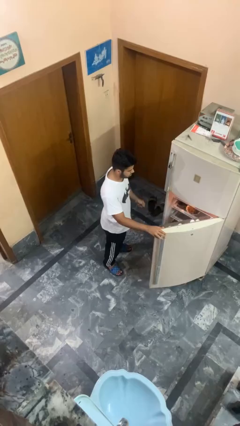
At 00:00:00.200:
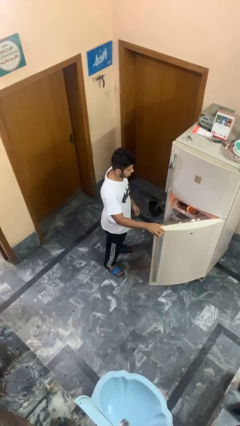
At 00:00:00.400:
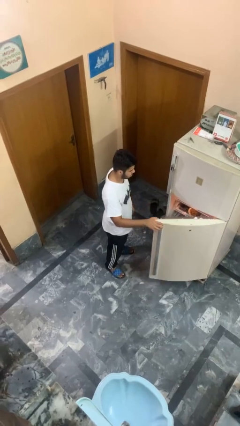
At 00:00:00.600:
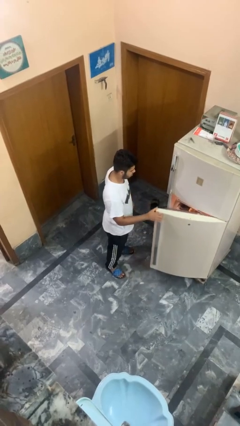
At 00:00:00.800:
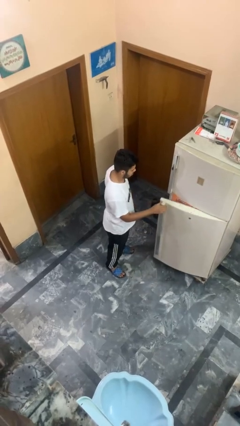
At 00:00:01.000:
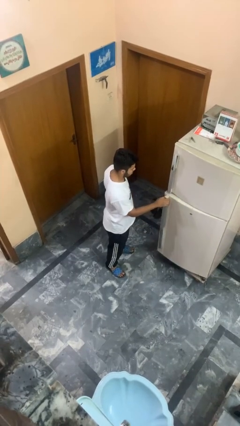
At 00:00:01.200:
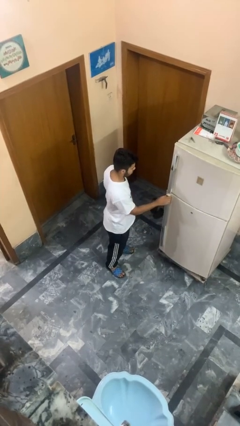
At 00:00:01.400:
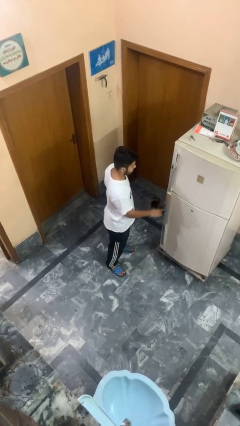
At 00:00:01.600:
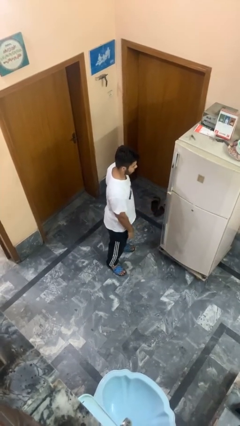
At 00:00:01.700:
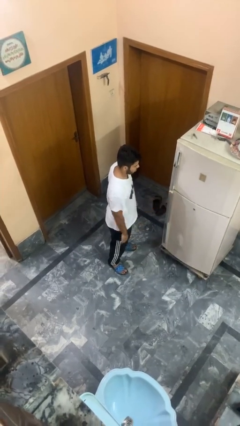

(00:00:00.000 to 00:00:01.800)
person closes refrigerator

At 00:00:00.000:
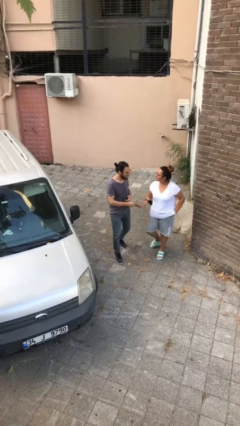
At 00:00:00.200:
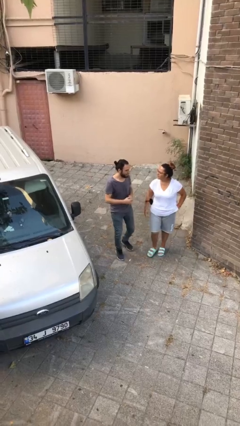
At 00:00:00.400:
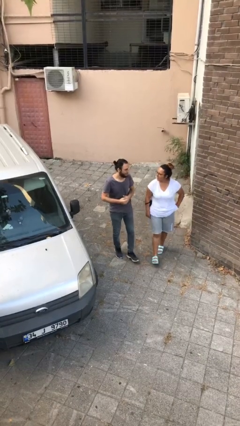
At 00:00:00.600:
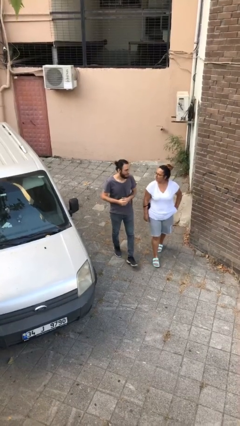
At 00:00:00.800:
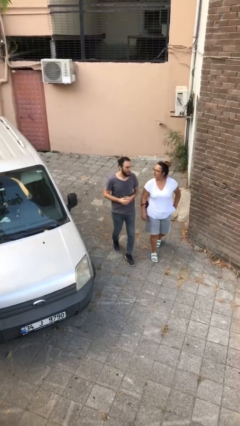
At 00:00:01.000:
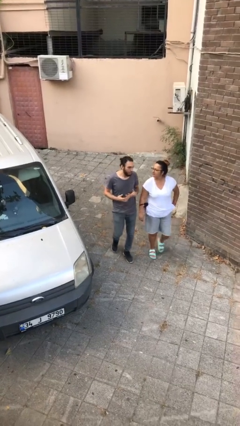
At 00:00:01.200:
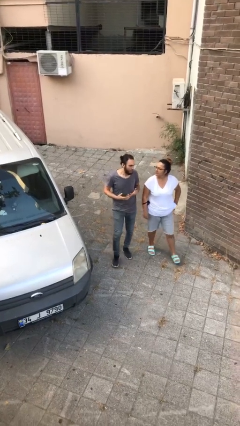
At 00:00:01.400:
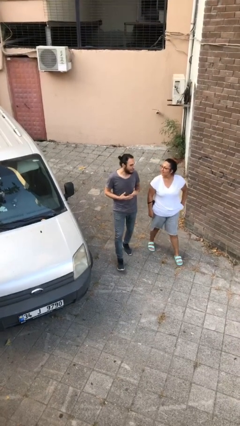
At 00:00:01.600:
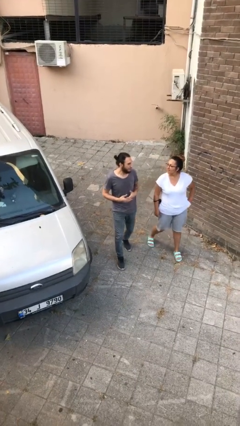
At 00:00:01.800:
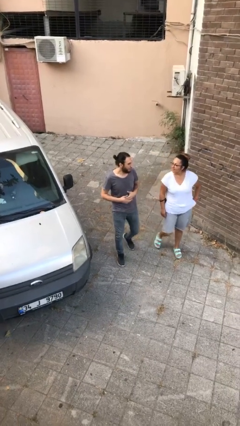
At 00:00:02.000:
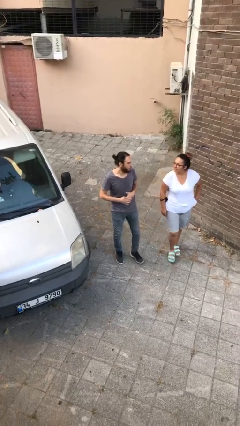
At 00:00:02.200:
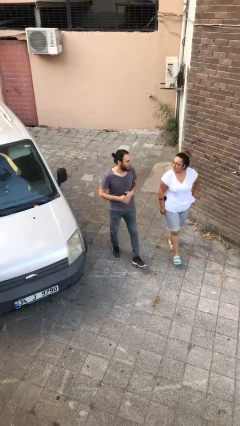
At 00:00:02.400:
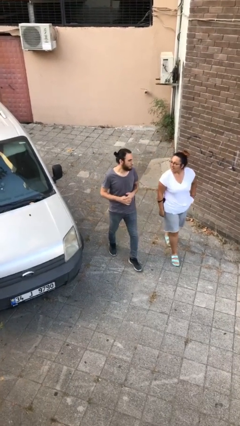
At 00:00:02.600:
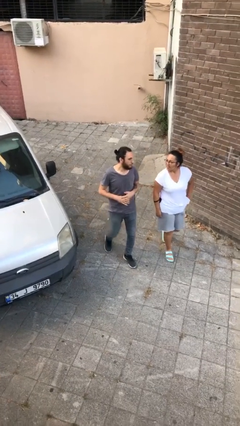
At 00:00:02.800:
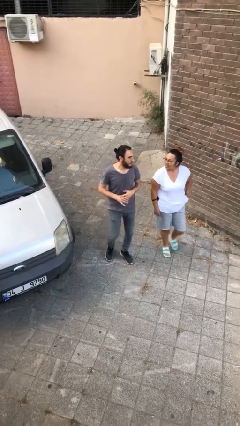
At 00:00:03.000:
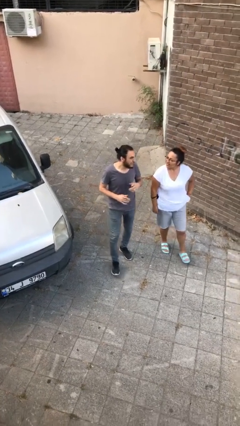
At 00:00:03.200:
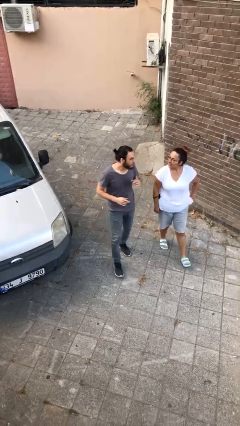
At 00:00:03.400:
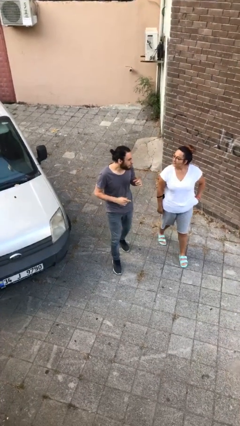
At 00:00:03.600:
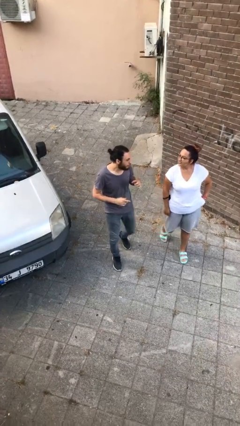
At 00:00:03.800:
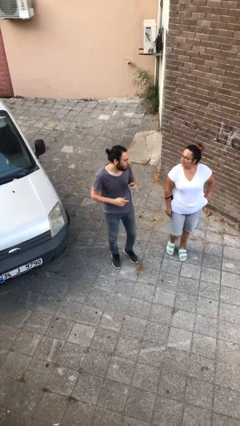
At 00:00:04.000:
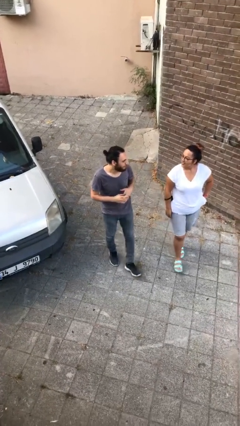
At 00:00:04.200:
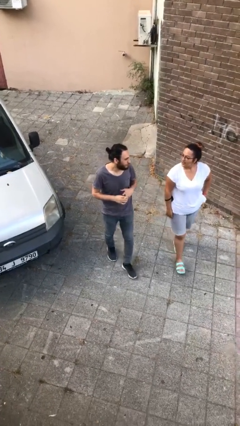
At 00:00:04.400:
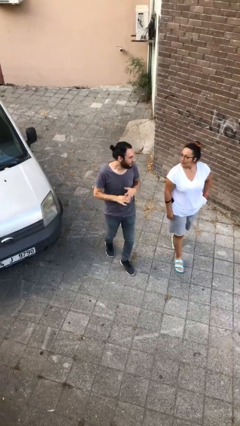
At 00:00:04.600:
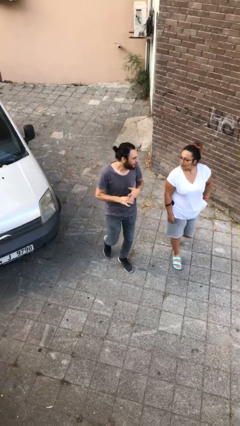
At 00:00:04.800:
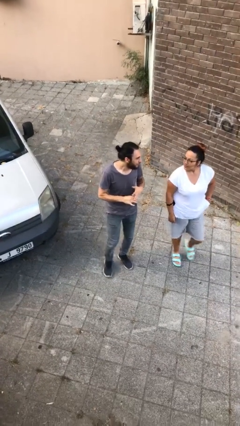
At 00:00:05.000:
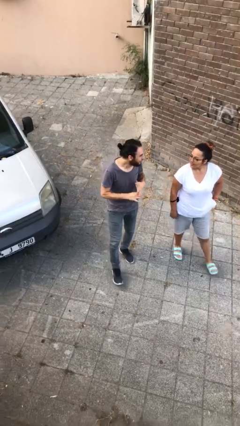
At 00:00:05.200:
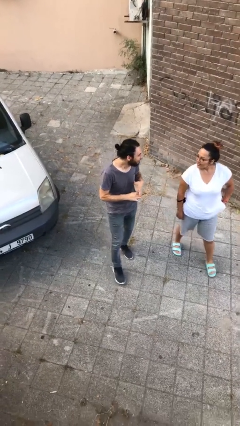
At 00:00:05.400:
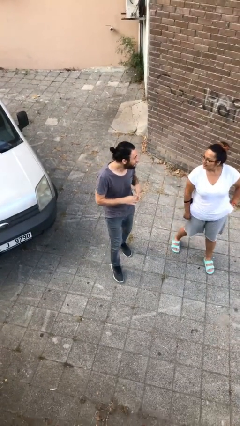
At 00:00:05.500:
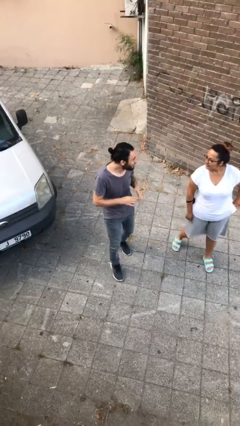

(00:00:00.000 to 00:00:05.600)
person talks to person

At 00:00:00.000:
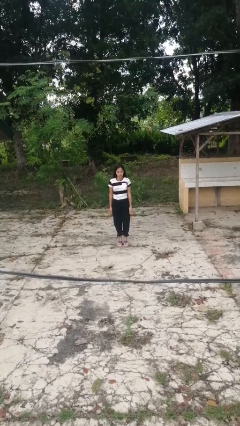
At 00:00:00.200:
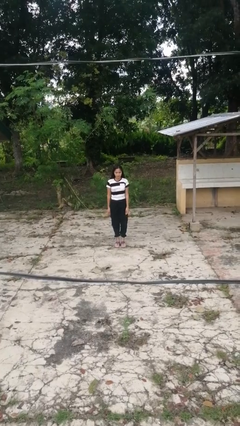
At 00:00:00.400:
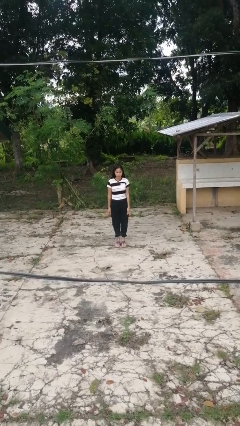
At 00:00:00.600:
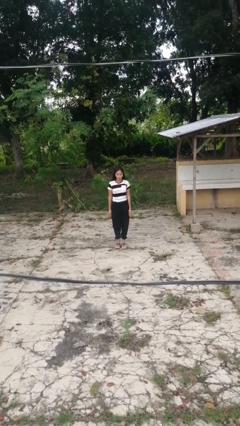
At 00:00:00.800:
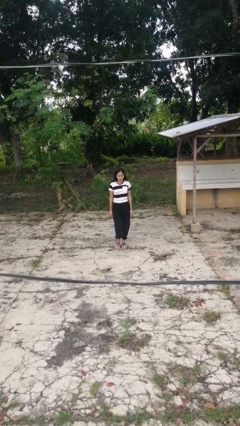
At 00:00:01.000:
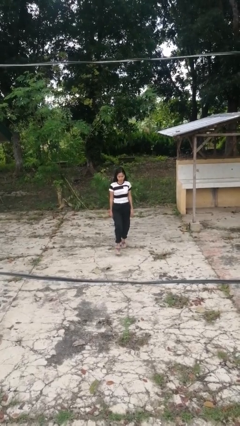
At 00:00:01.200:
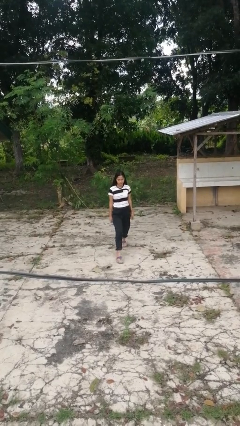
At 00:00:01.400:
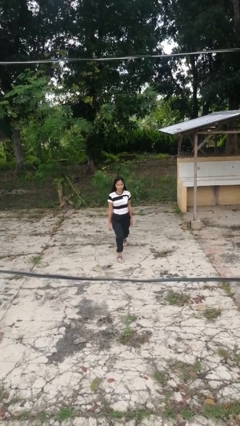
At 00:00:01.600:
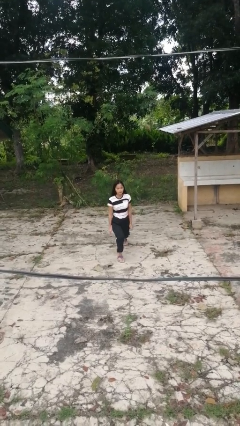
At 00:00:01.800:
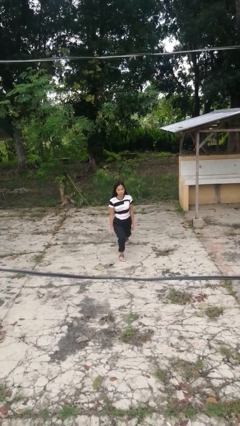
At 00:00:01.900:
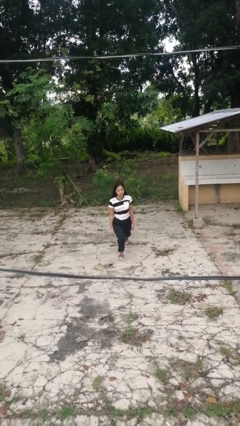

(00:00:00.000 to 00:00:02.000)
person exercises with lunges

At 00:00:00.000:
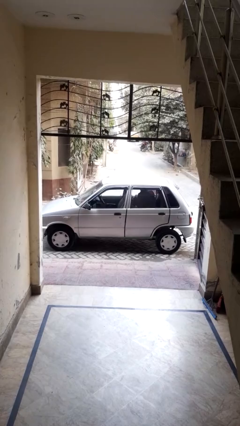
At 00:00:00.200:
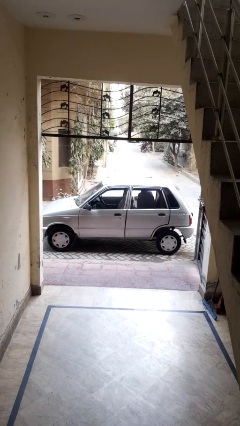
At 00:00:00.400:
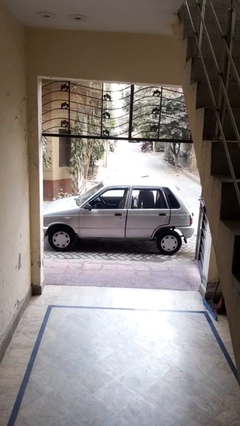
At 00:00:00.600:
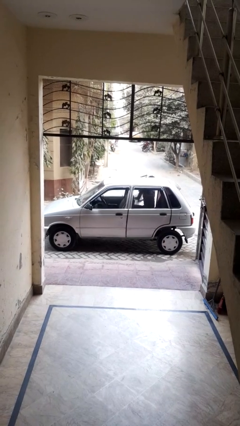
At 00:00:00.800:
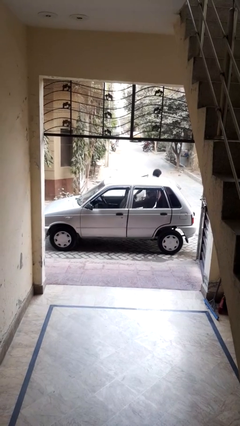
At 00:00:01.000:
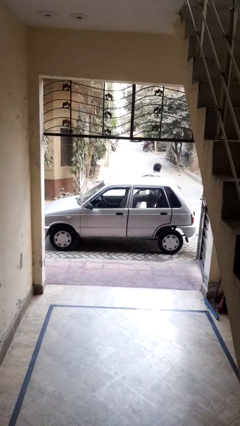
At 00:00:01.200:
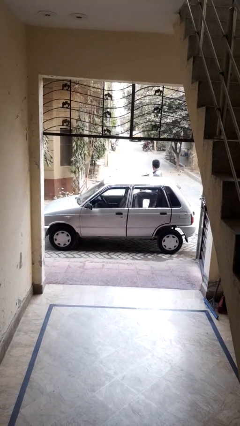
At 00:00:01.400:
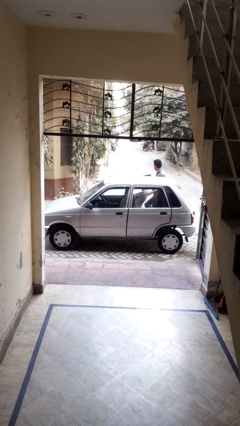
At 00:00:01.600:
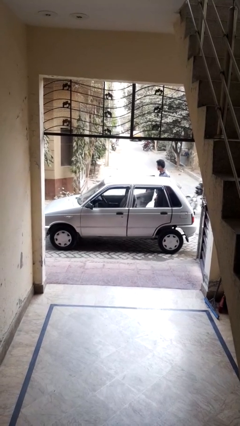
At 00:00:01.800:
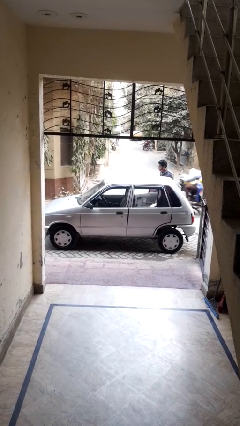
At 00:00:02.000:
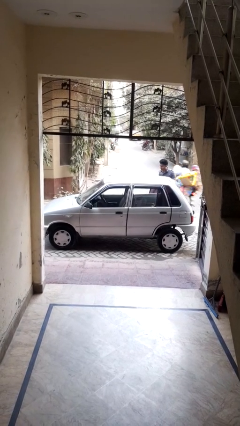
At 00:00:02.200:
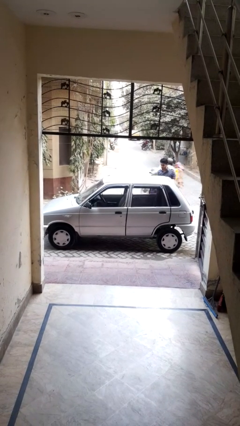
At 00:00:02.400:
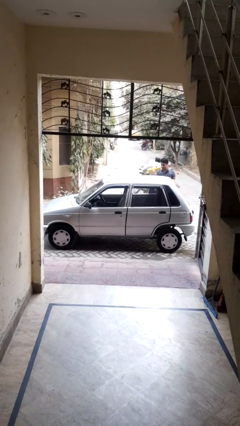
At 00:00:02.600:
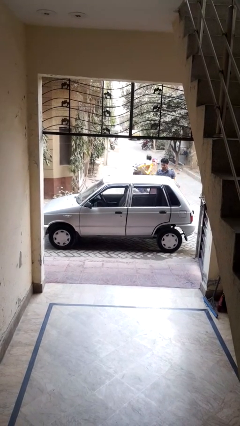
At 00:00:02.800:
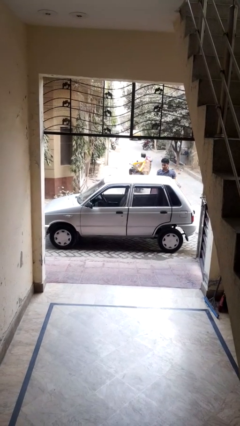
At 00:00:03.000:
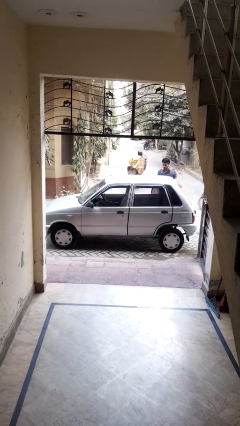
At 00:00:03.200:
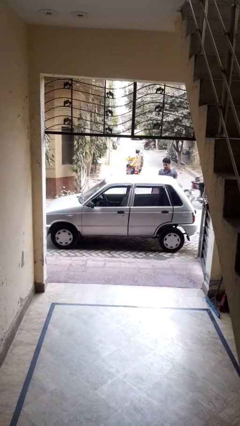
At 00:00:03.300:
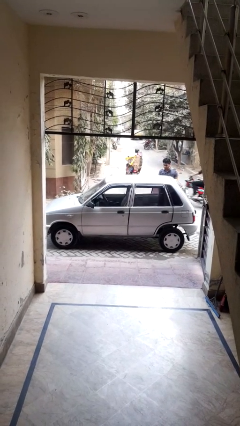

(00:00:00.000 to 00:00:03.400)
car drops off person

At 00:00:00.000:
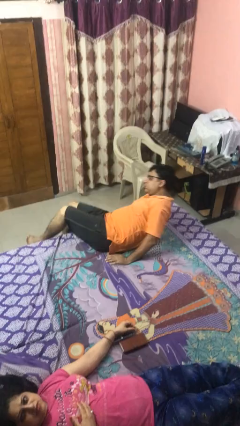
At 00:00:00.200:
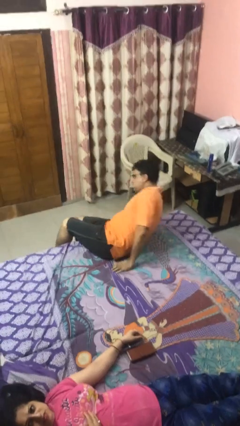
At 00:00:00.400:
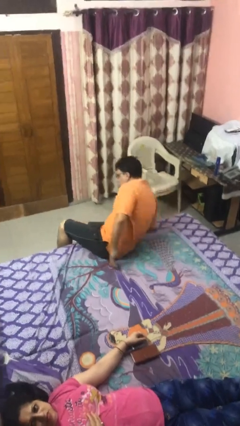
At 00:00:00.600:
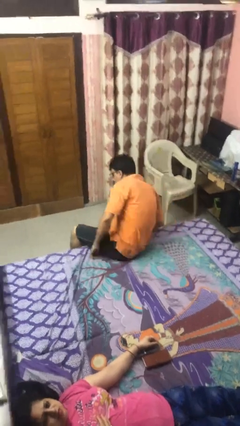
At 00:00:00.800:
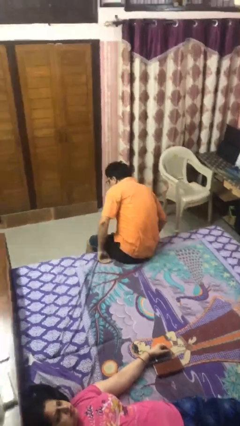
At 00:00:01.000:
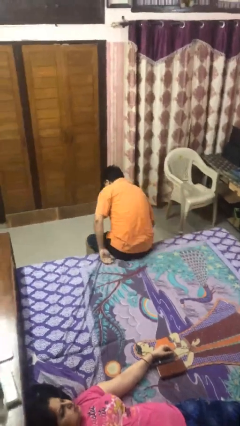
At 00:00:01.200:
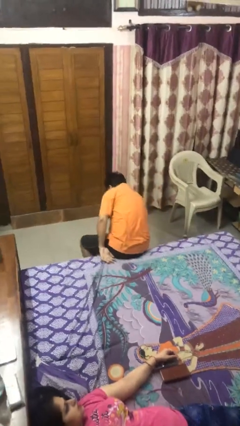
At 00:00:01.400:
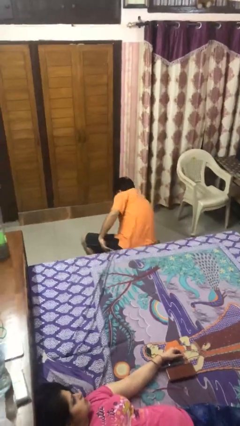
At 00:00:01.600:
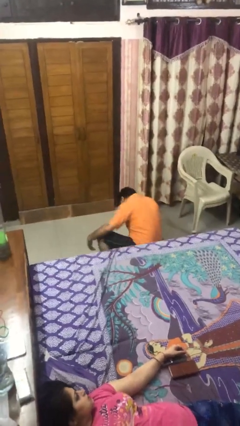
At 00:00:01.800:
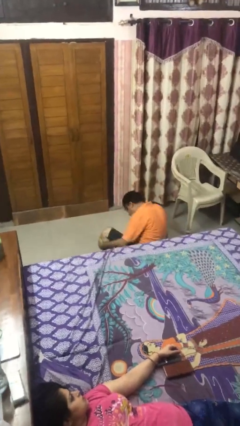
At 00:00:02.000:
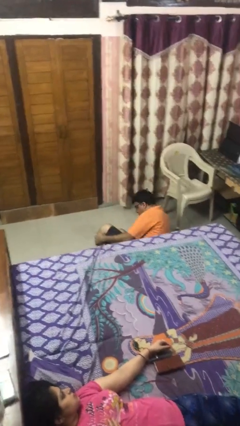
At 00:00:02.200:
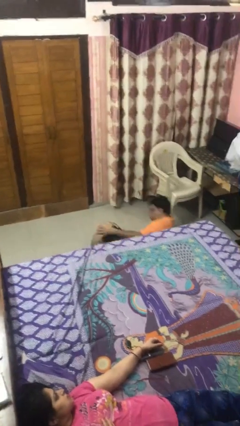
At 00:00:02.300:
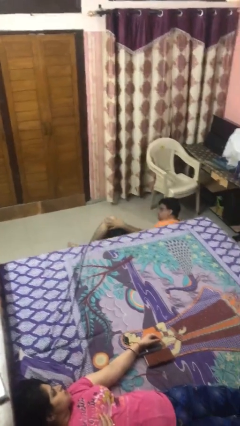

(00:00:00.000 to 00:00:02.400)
person falls from bed

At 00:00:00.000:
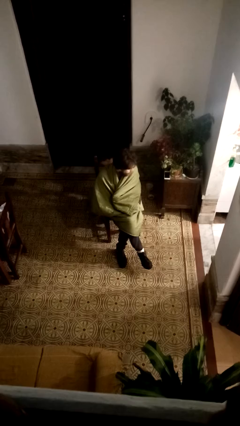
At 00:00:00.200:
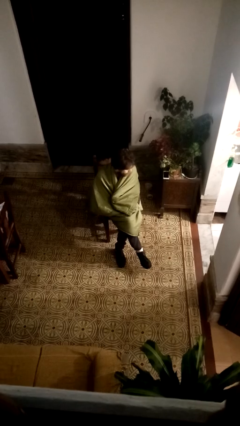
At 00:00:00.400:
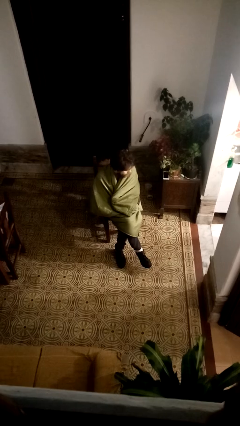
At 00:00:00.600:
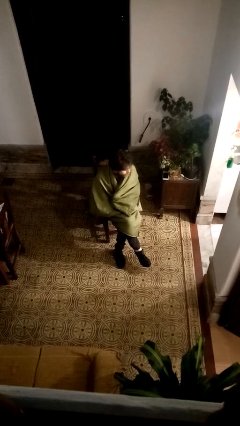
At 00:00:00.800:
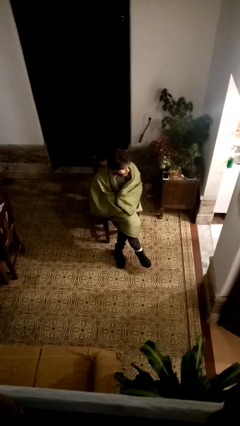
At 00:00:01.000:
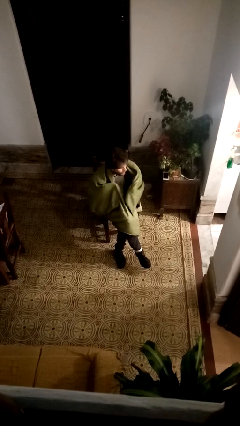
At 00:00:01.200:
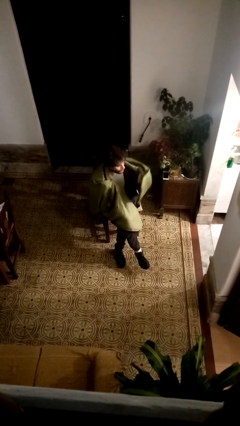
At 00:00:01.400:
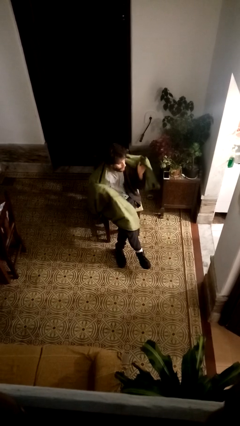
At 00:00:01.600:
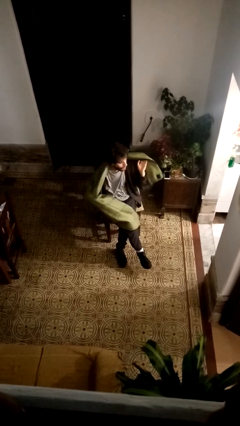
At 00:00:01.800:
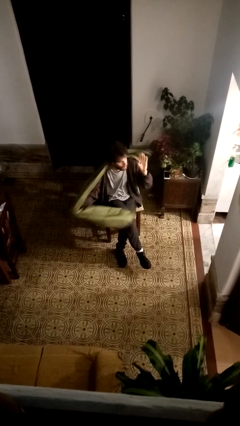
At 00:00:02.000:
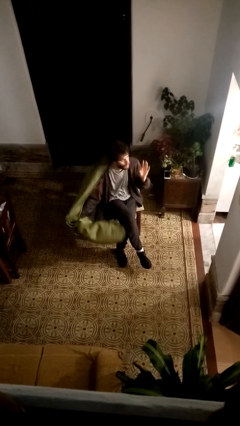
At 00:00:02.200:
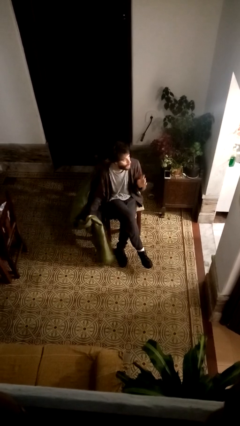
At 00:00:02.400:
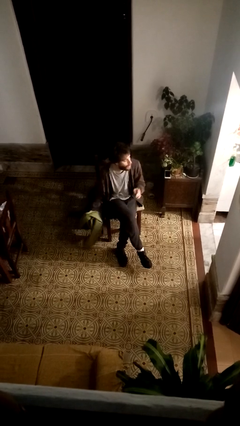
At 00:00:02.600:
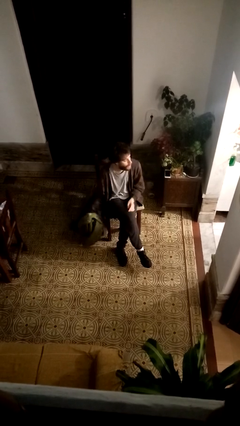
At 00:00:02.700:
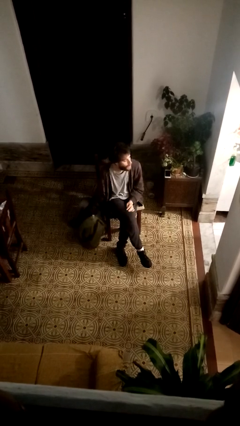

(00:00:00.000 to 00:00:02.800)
person uncovers with blanket
